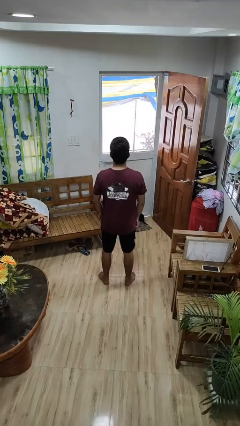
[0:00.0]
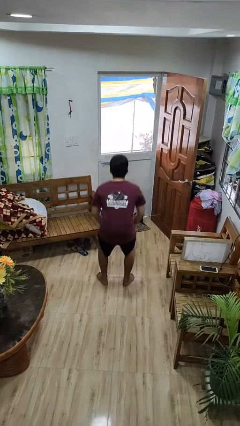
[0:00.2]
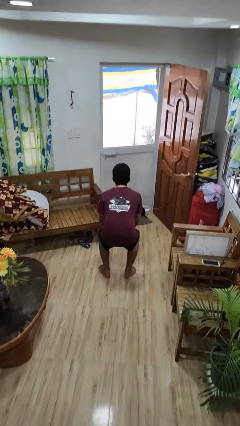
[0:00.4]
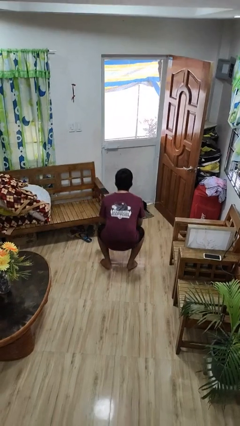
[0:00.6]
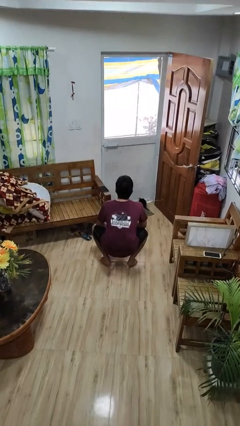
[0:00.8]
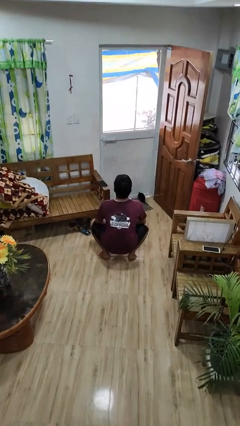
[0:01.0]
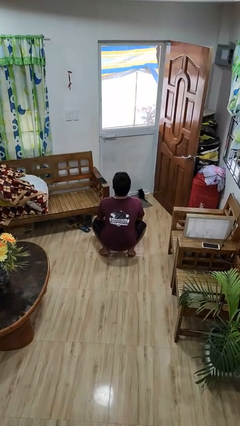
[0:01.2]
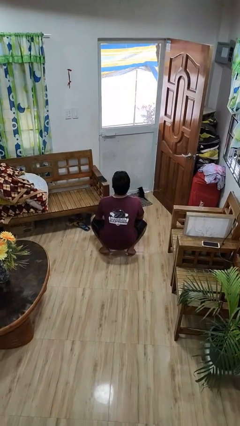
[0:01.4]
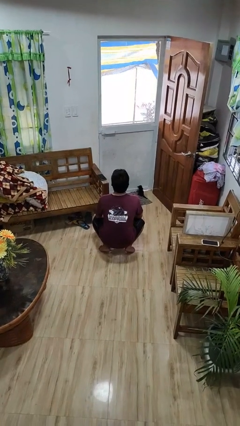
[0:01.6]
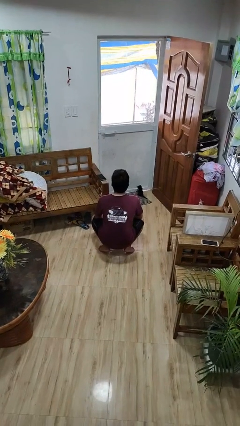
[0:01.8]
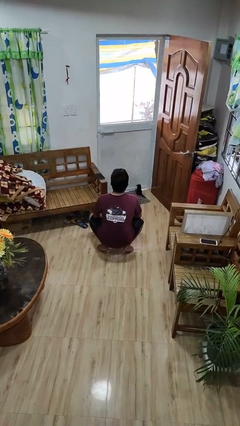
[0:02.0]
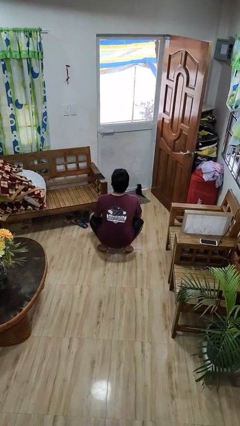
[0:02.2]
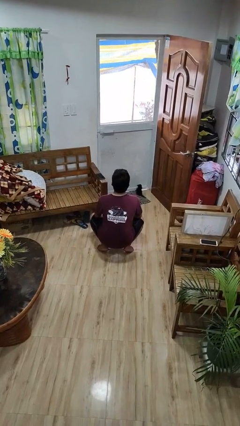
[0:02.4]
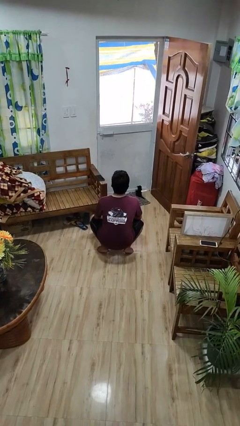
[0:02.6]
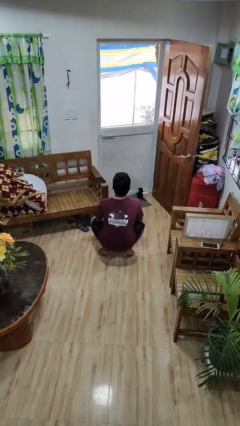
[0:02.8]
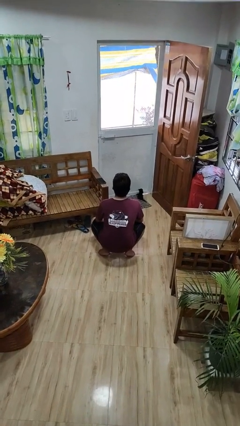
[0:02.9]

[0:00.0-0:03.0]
person squats

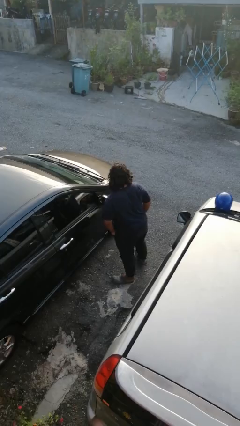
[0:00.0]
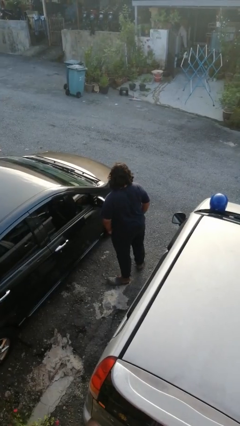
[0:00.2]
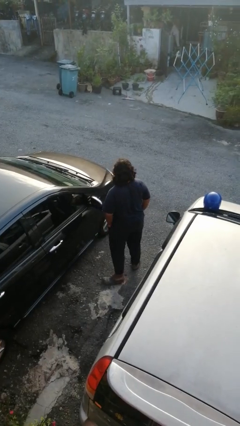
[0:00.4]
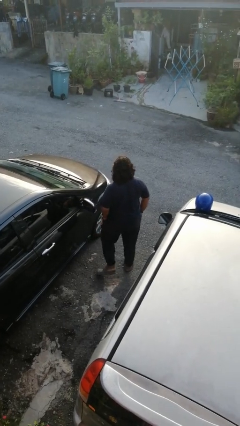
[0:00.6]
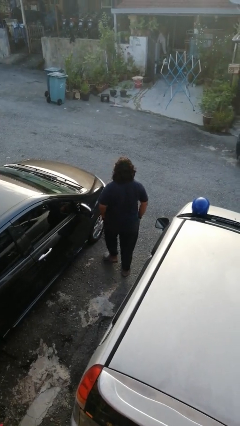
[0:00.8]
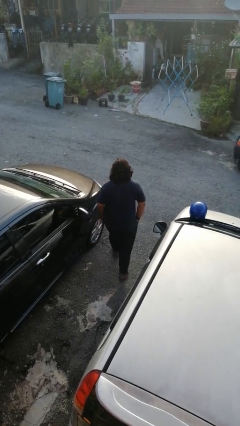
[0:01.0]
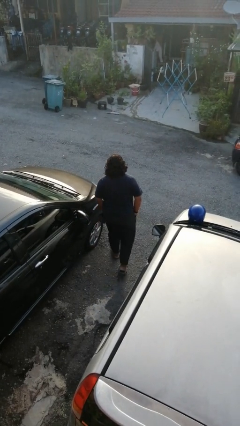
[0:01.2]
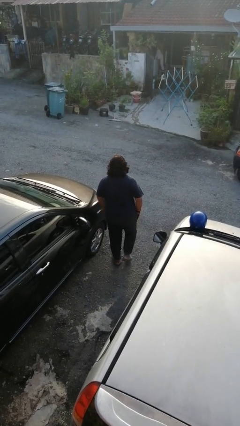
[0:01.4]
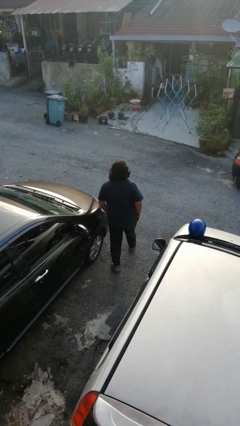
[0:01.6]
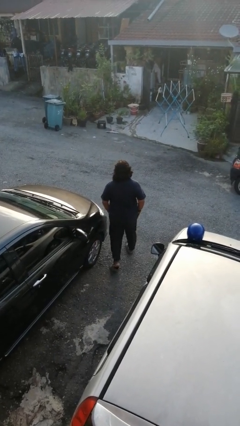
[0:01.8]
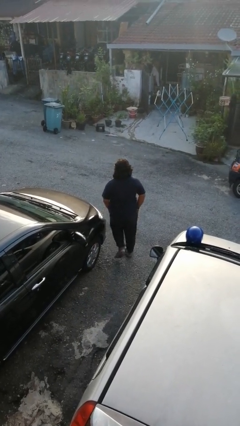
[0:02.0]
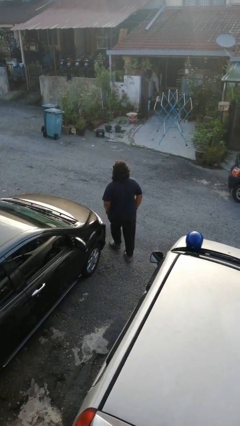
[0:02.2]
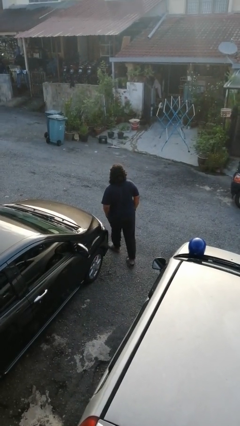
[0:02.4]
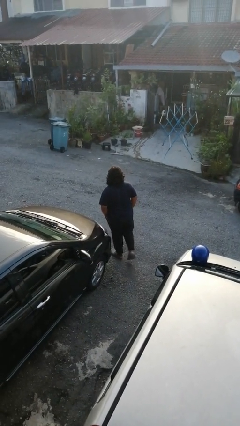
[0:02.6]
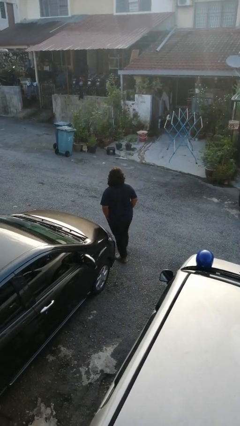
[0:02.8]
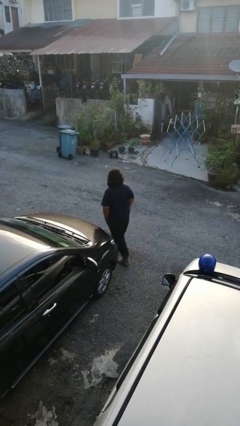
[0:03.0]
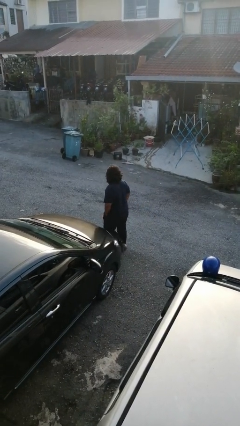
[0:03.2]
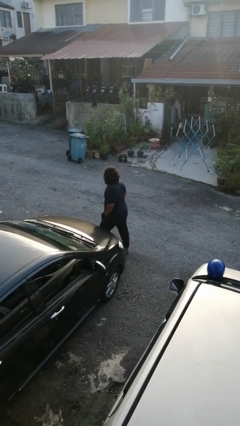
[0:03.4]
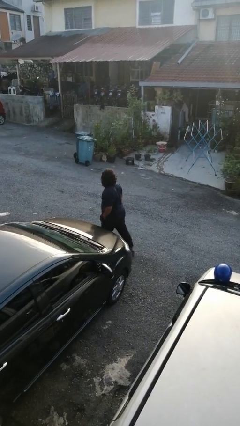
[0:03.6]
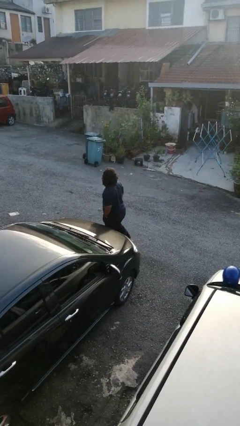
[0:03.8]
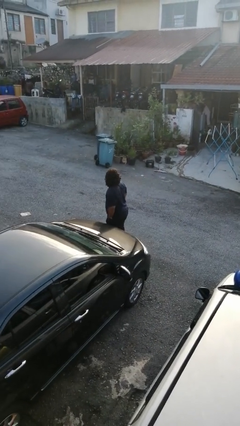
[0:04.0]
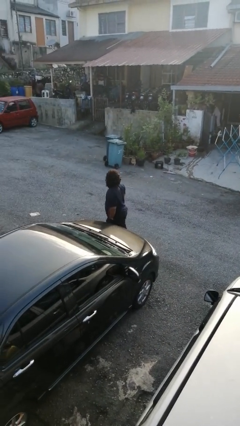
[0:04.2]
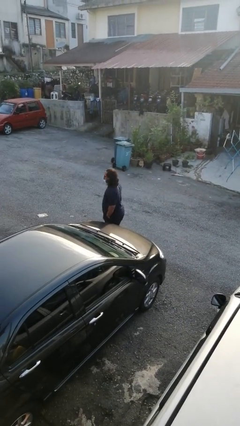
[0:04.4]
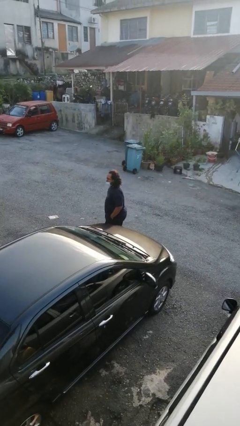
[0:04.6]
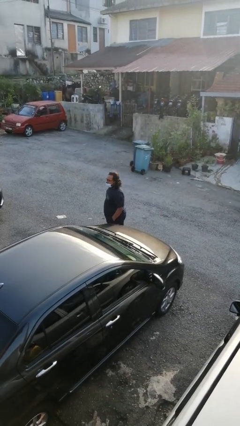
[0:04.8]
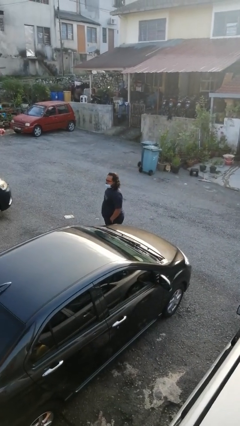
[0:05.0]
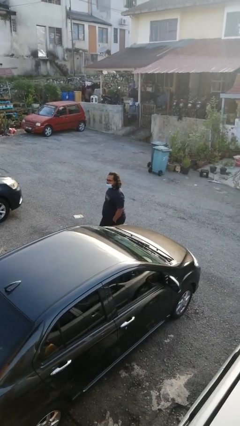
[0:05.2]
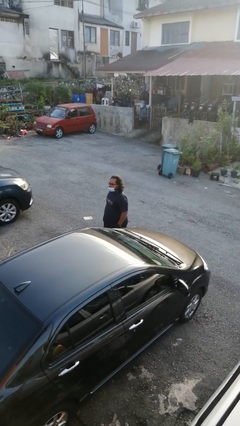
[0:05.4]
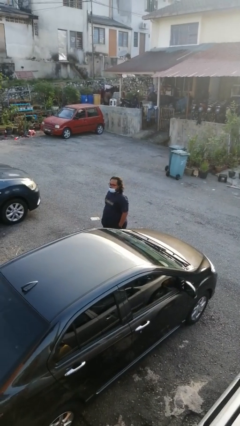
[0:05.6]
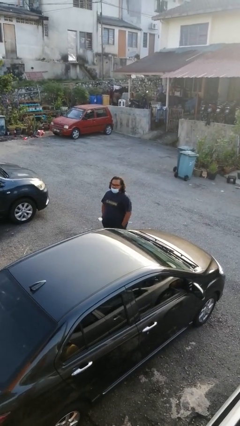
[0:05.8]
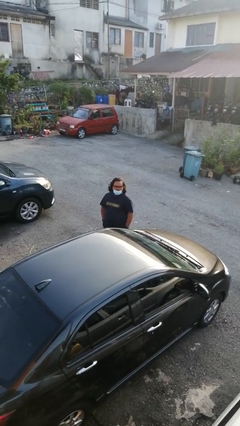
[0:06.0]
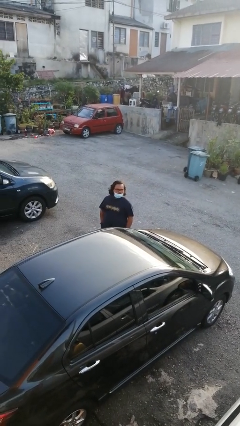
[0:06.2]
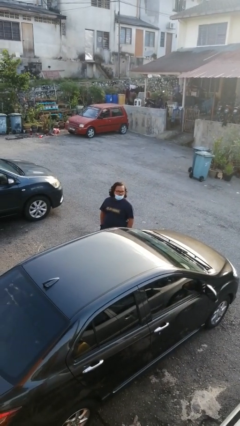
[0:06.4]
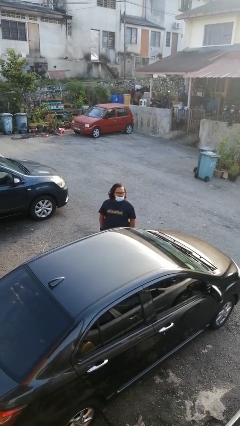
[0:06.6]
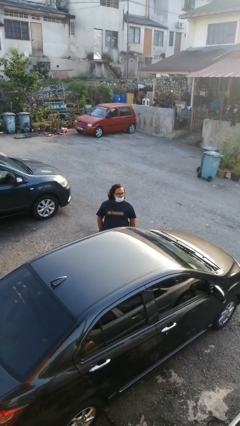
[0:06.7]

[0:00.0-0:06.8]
person walks around car

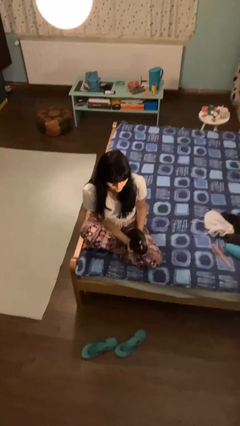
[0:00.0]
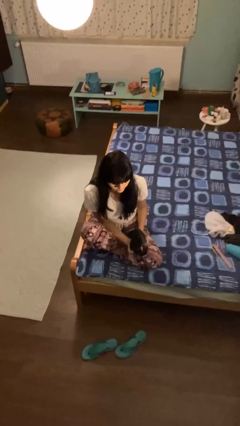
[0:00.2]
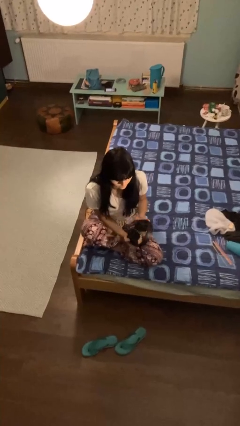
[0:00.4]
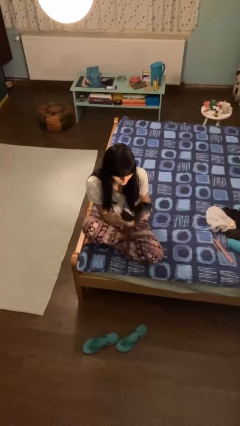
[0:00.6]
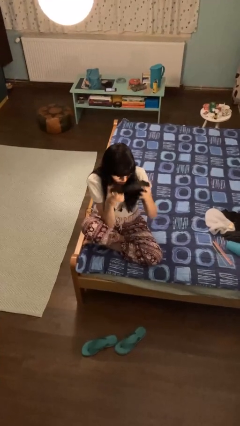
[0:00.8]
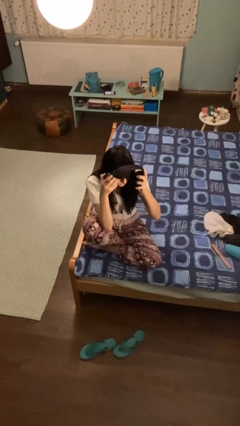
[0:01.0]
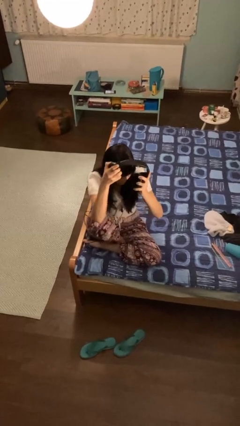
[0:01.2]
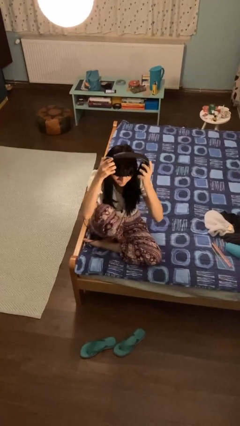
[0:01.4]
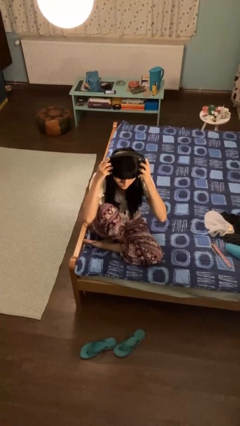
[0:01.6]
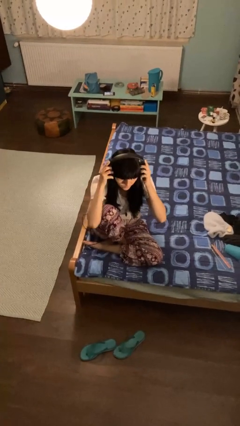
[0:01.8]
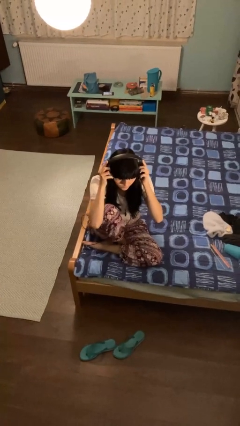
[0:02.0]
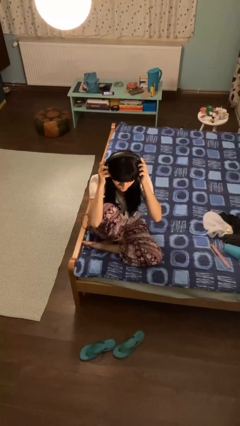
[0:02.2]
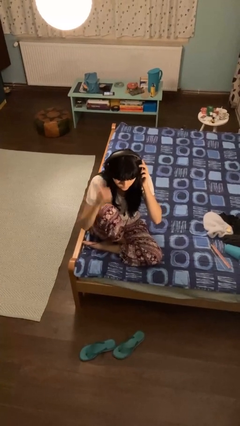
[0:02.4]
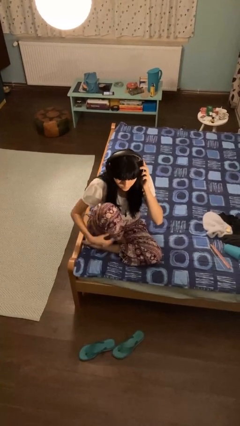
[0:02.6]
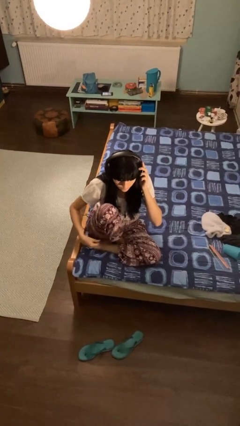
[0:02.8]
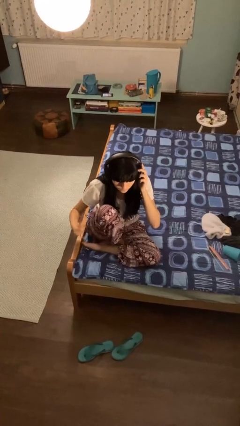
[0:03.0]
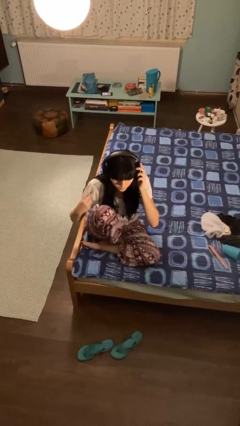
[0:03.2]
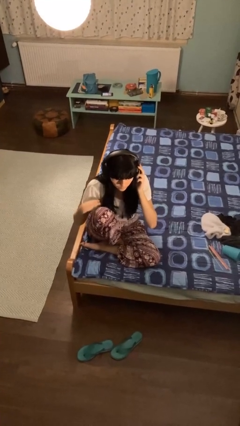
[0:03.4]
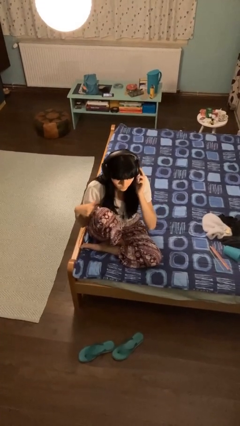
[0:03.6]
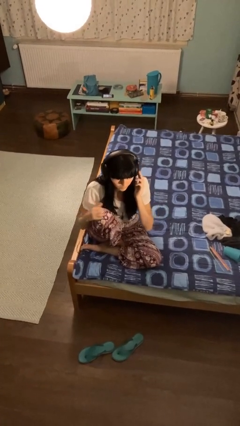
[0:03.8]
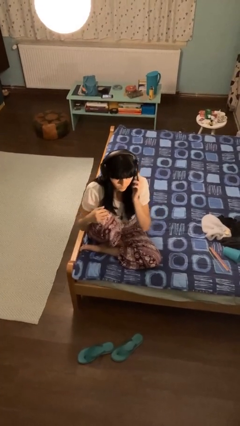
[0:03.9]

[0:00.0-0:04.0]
person puts on headphones

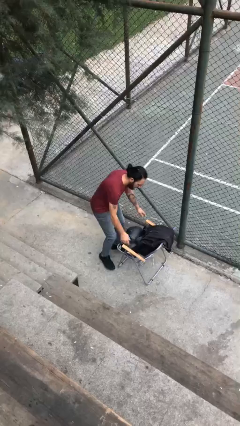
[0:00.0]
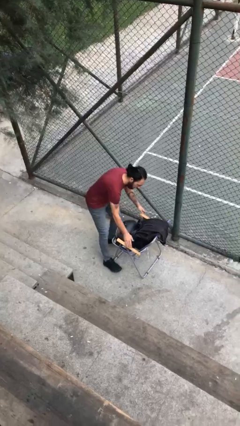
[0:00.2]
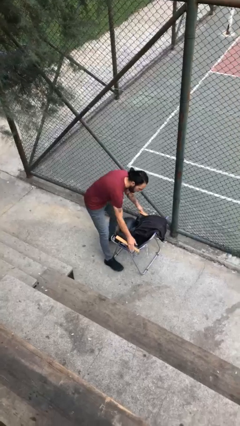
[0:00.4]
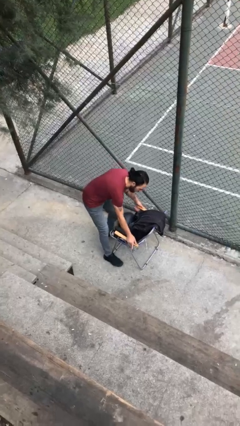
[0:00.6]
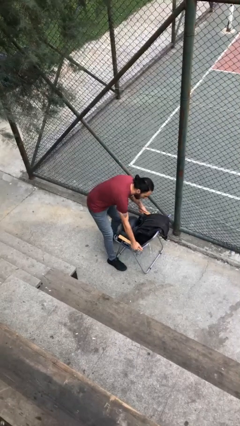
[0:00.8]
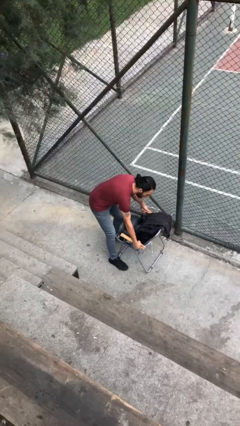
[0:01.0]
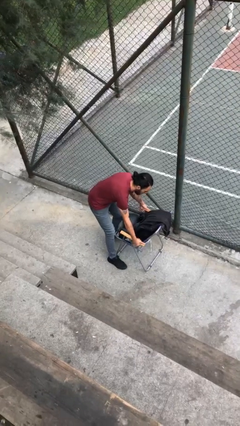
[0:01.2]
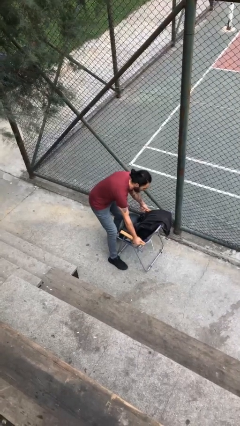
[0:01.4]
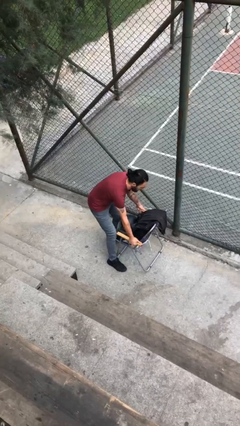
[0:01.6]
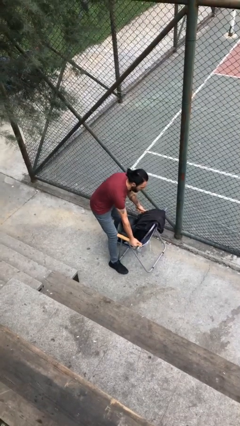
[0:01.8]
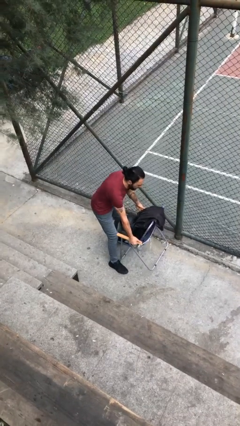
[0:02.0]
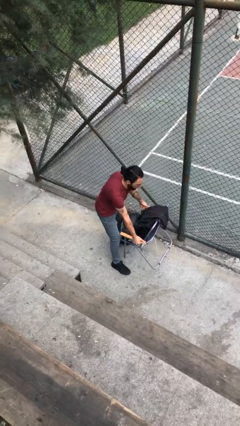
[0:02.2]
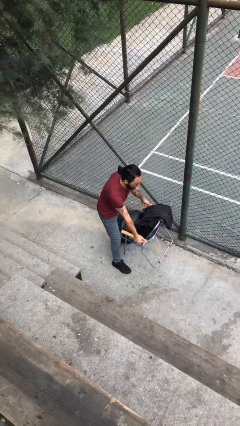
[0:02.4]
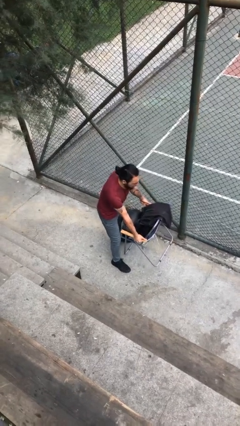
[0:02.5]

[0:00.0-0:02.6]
person picks up object from floor

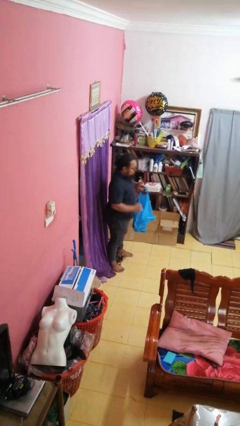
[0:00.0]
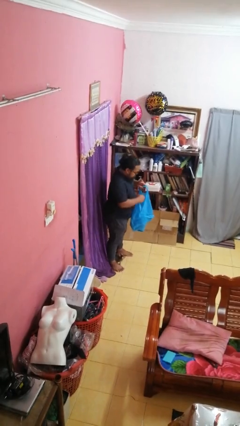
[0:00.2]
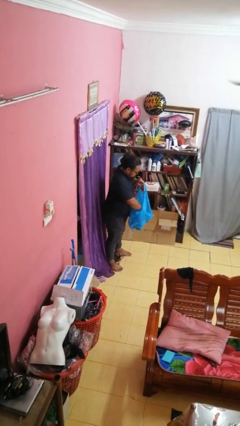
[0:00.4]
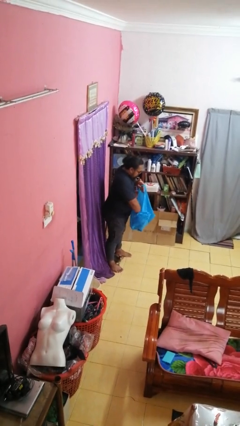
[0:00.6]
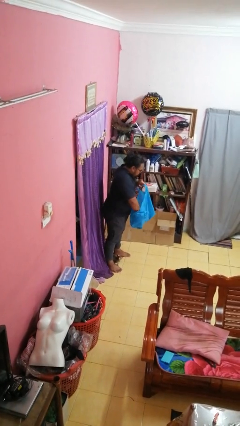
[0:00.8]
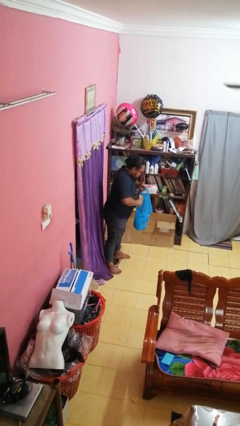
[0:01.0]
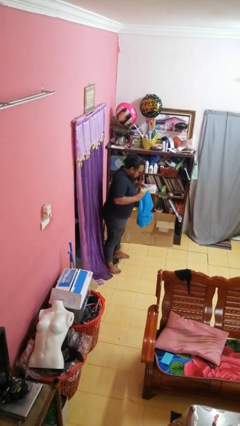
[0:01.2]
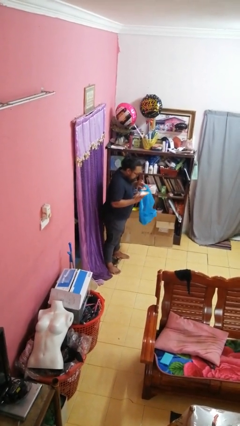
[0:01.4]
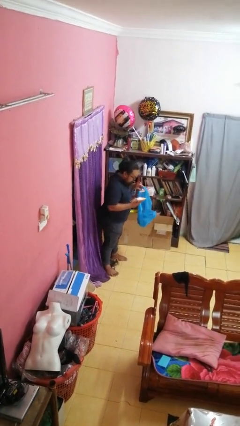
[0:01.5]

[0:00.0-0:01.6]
person takes object from bag
